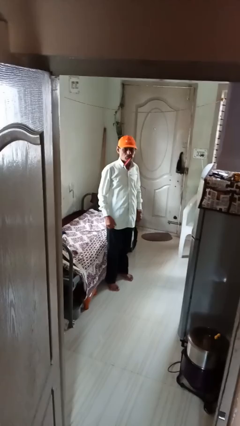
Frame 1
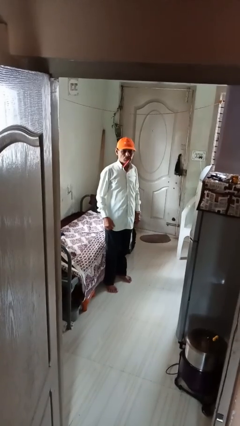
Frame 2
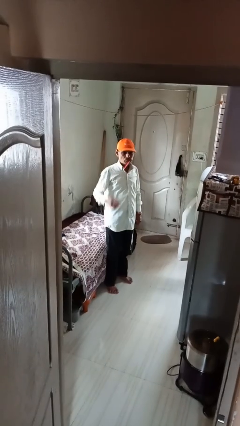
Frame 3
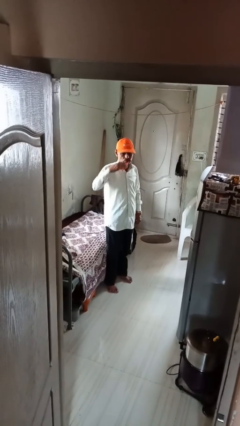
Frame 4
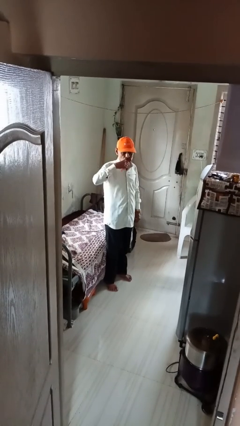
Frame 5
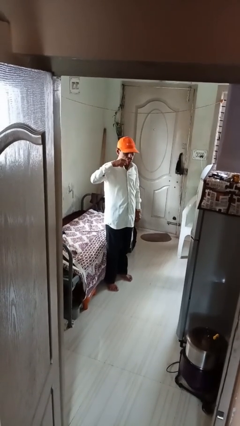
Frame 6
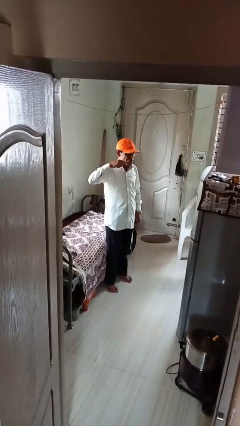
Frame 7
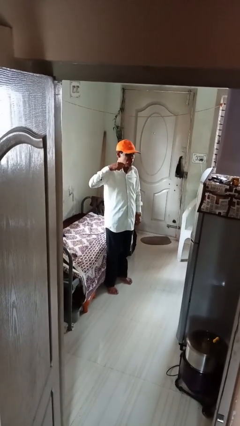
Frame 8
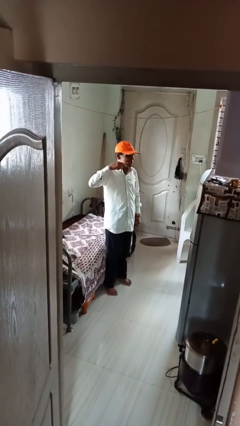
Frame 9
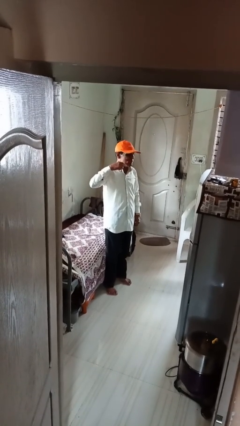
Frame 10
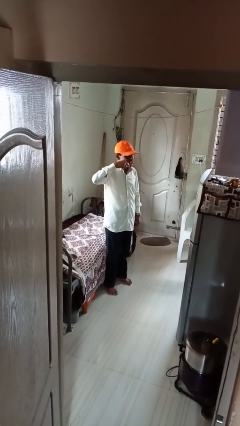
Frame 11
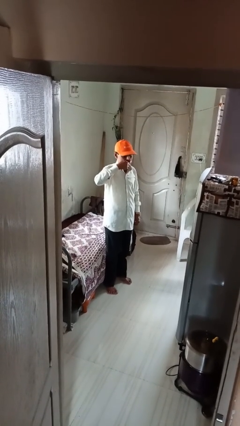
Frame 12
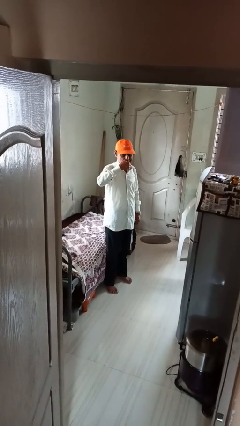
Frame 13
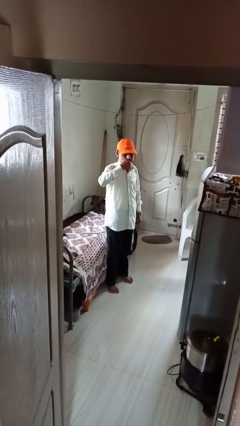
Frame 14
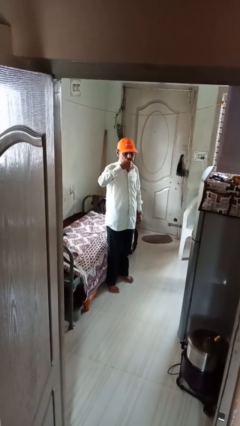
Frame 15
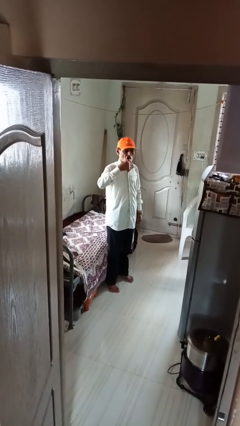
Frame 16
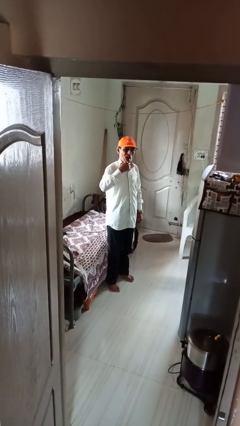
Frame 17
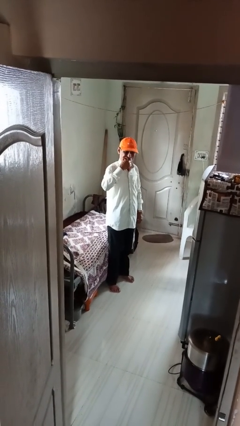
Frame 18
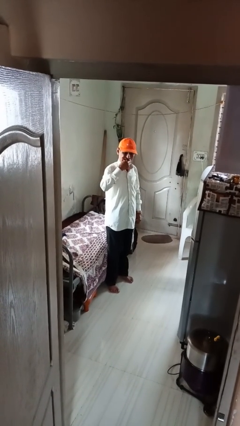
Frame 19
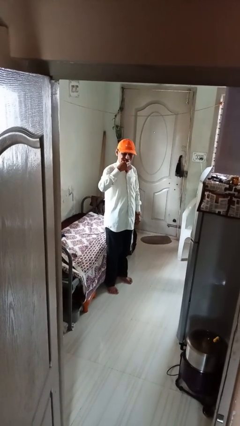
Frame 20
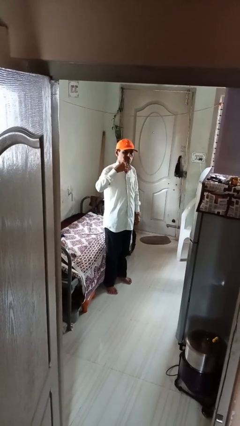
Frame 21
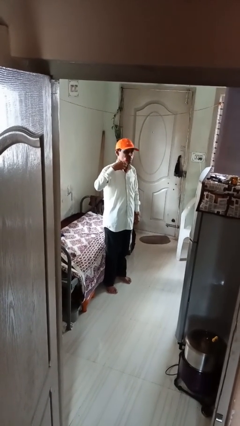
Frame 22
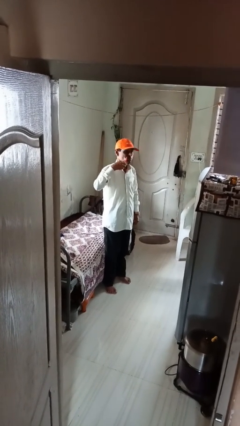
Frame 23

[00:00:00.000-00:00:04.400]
person brushes teeth

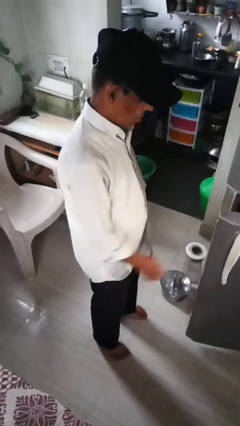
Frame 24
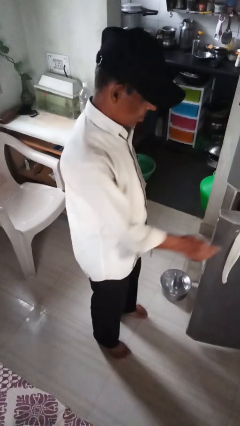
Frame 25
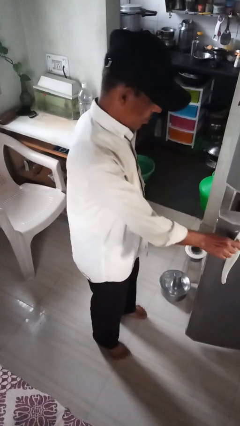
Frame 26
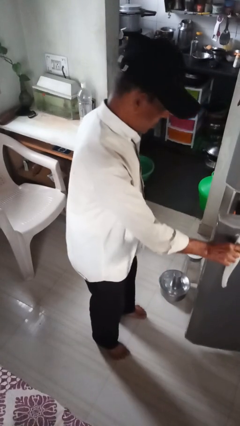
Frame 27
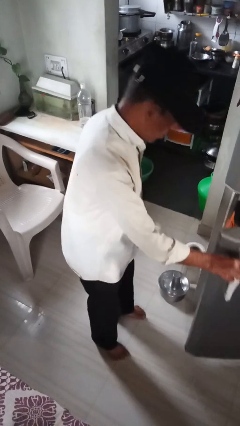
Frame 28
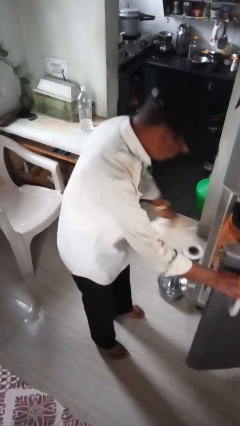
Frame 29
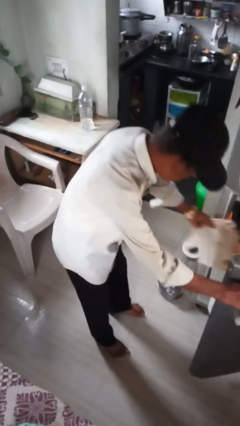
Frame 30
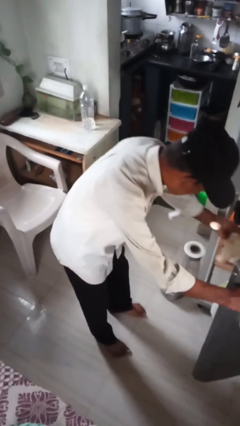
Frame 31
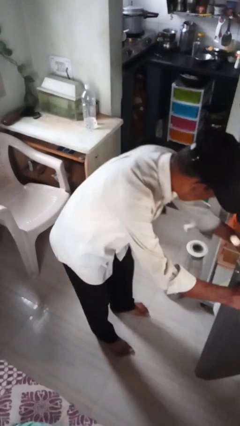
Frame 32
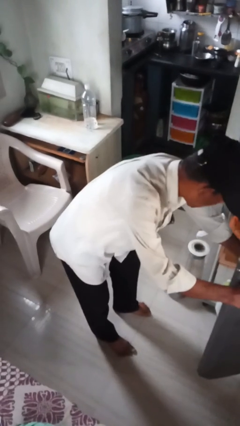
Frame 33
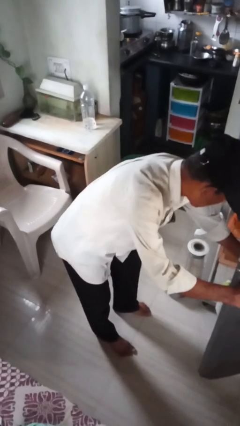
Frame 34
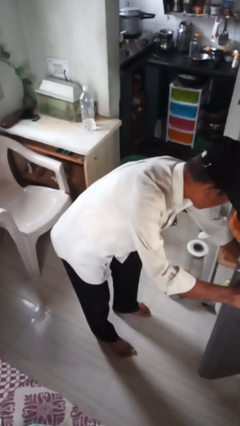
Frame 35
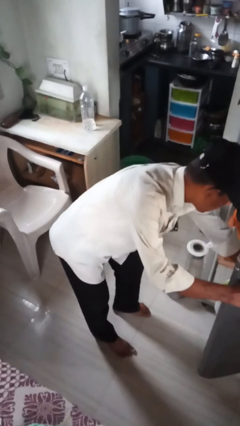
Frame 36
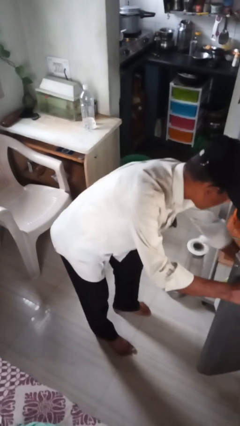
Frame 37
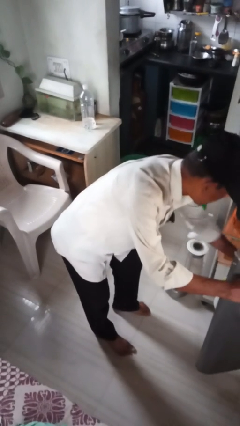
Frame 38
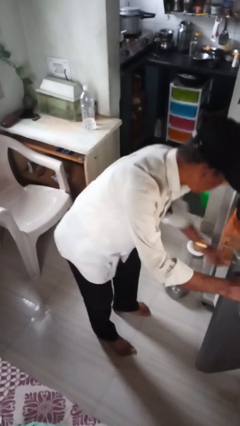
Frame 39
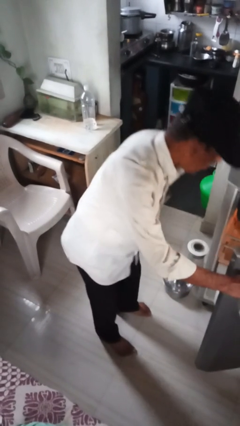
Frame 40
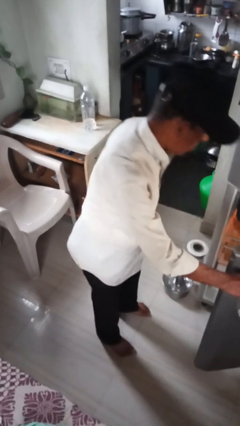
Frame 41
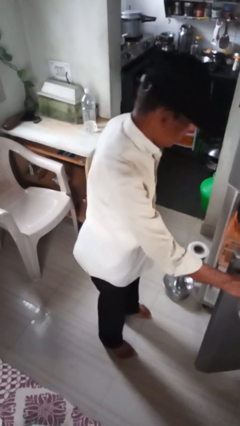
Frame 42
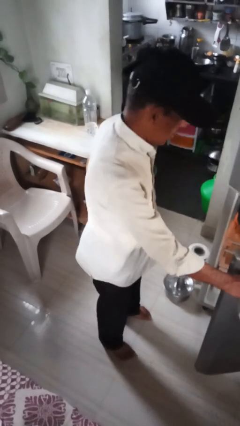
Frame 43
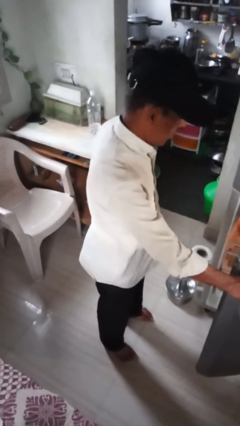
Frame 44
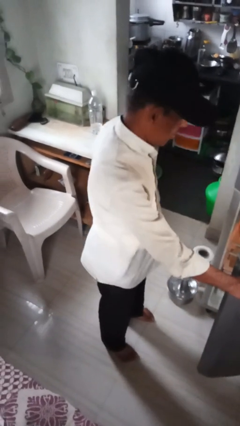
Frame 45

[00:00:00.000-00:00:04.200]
person loads clotheswasher

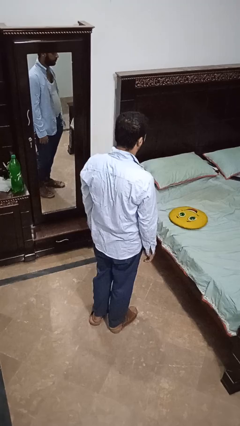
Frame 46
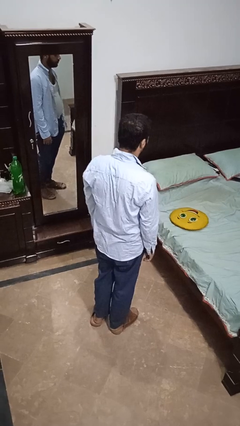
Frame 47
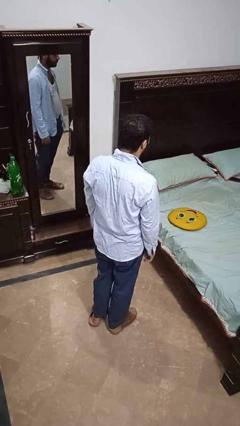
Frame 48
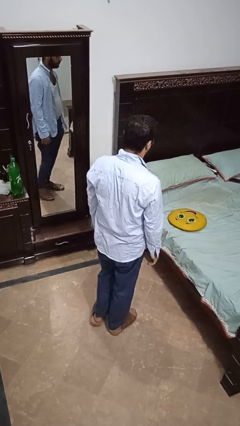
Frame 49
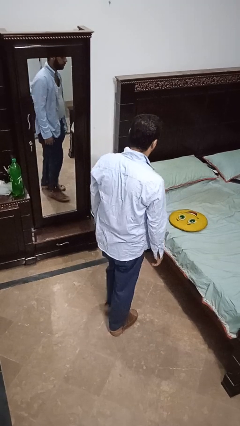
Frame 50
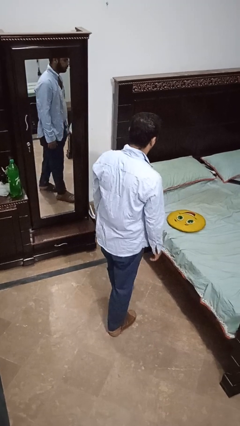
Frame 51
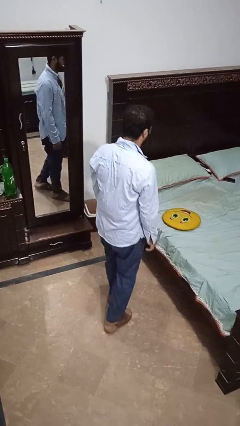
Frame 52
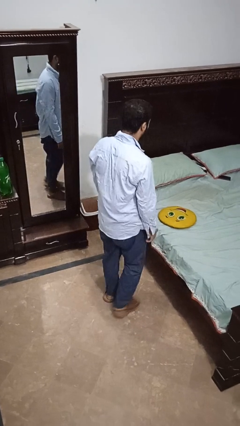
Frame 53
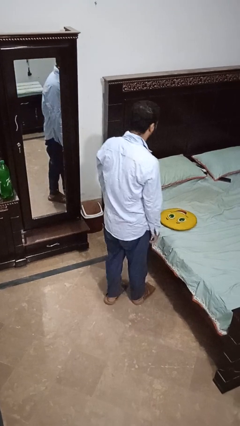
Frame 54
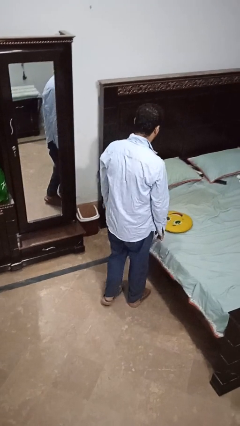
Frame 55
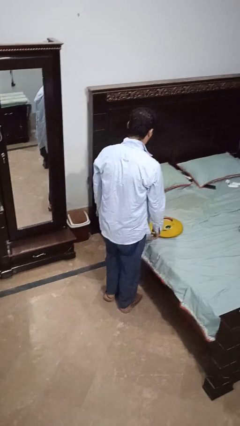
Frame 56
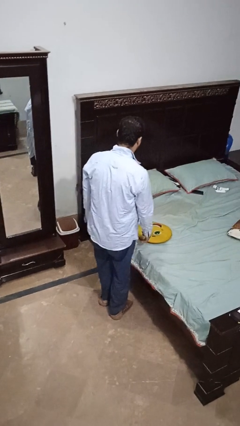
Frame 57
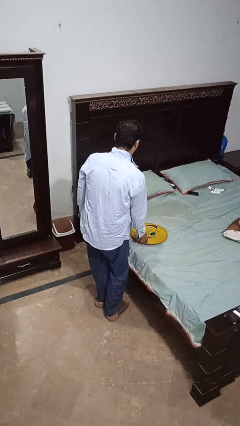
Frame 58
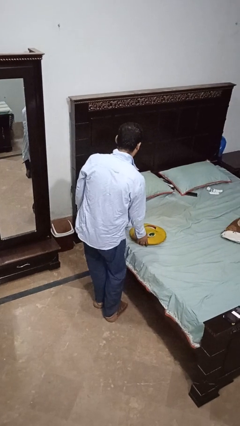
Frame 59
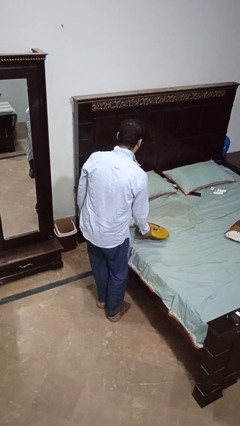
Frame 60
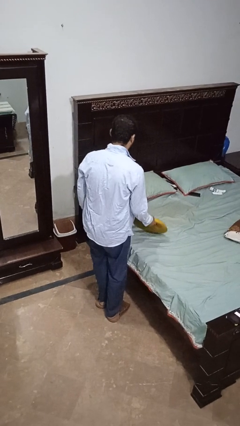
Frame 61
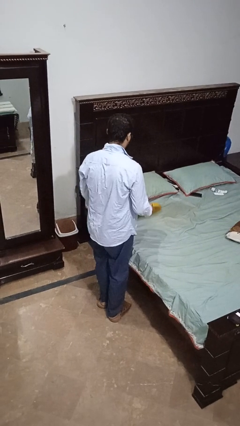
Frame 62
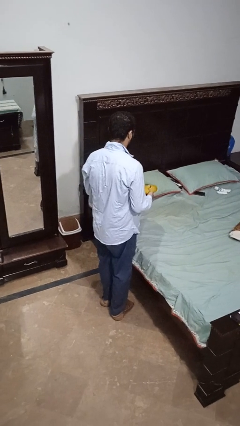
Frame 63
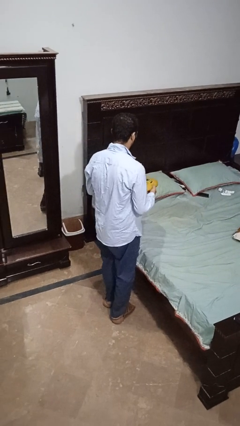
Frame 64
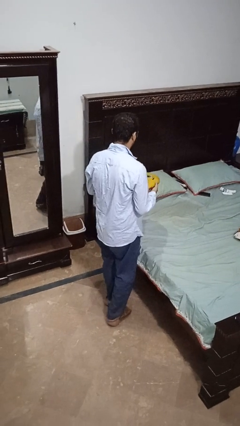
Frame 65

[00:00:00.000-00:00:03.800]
person picks up object from bed

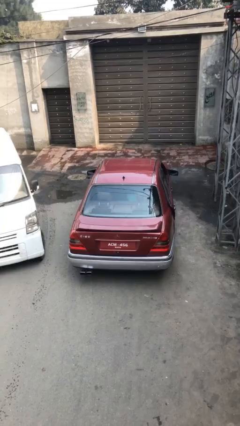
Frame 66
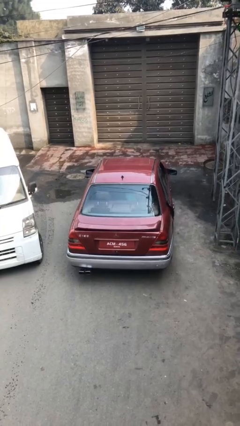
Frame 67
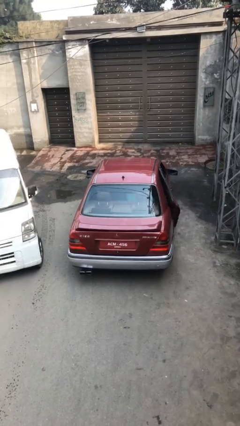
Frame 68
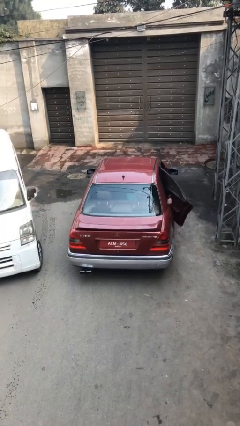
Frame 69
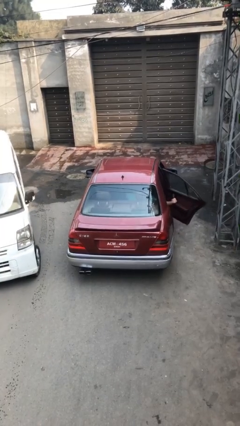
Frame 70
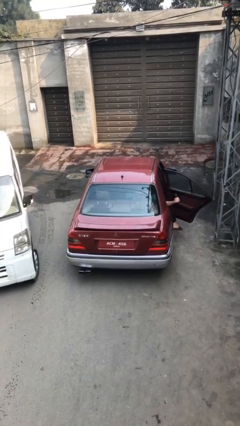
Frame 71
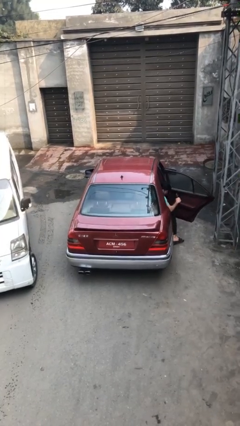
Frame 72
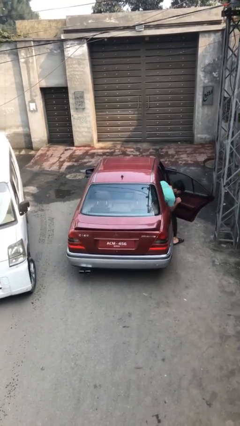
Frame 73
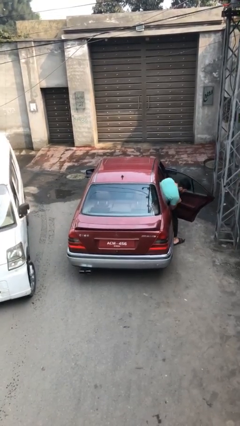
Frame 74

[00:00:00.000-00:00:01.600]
car drops off person

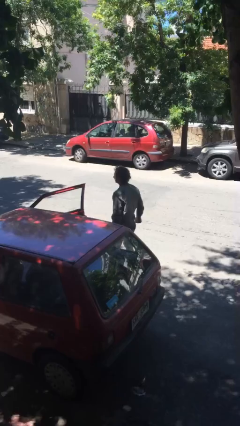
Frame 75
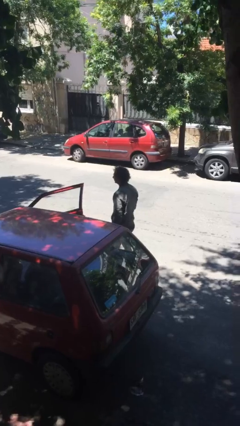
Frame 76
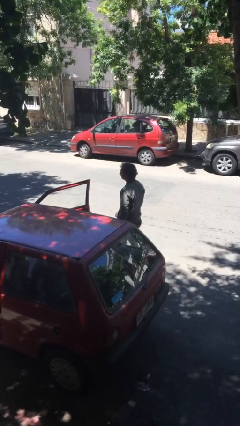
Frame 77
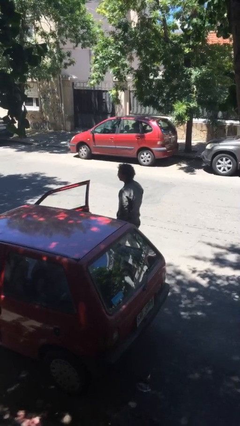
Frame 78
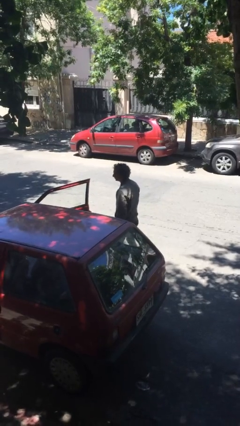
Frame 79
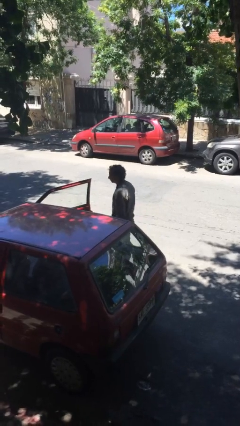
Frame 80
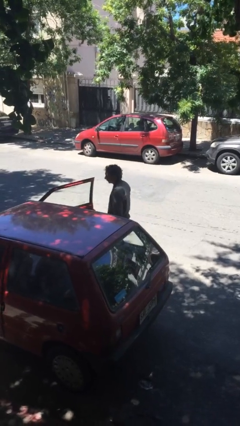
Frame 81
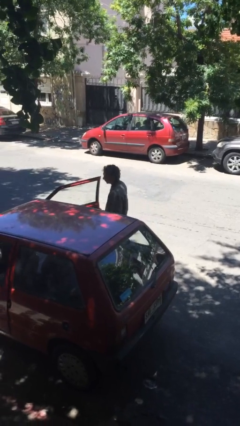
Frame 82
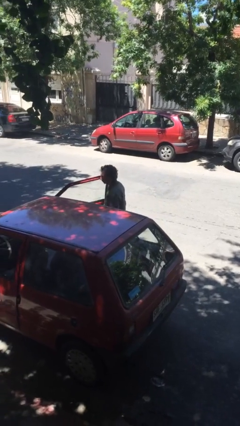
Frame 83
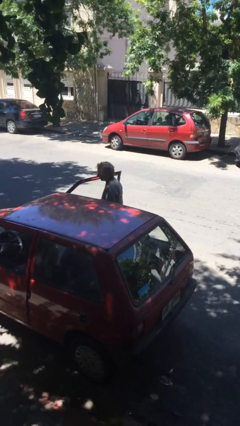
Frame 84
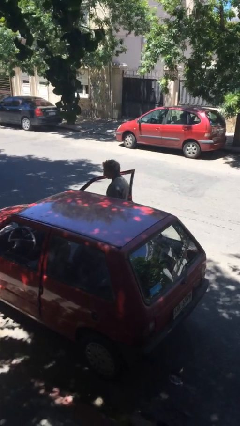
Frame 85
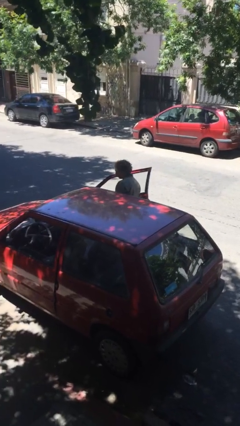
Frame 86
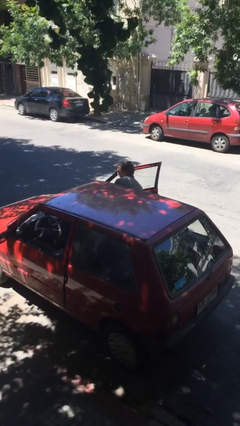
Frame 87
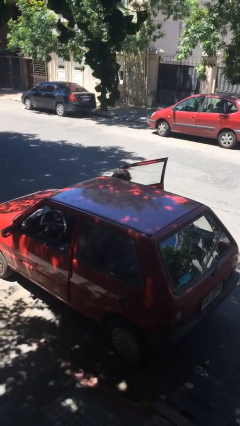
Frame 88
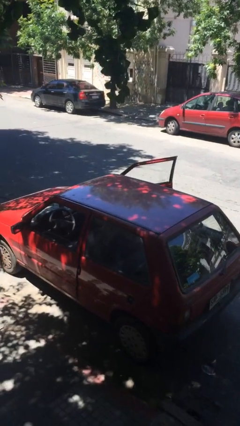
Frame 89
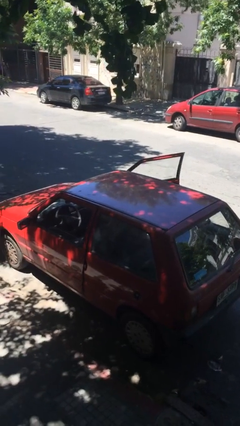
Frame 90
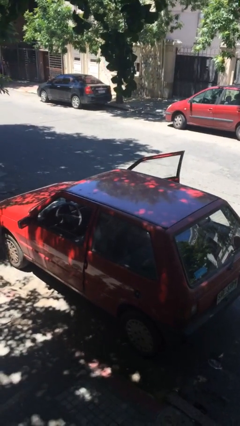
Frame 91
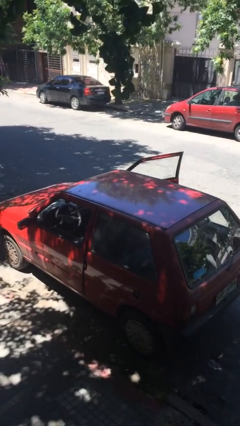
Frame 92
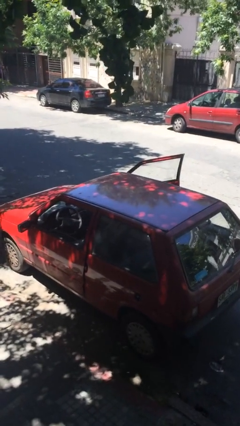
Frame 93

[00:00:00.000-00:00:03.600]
person enters car
